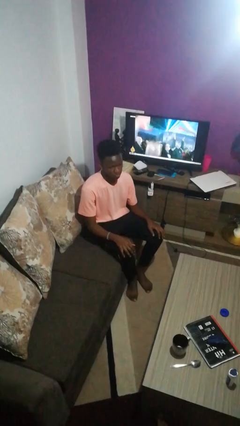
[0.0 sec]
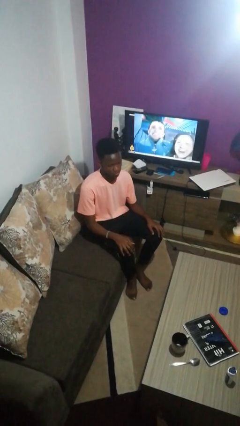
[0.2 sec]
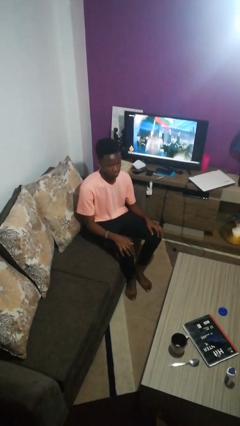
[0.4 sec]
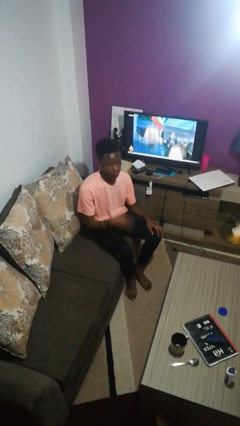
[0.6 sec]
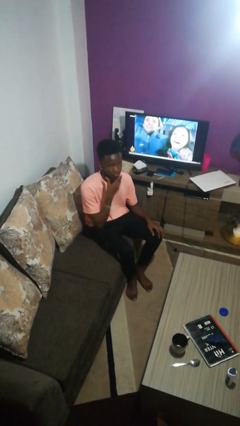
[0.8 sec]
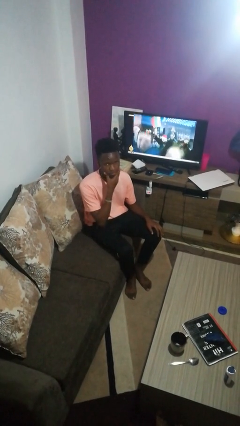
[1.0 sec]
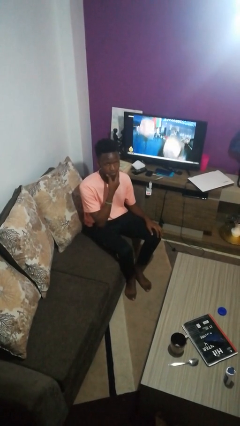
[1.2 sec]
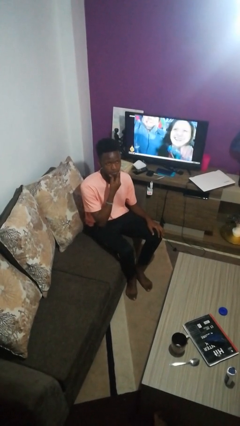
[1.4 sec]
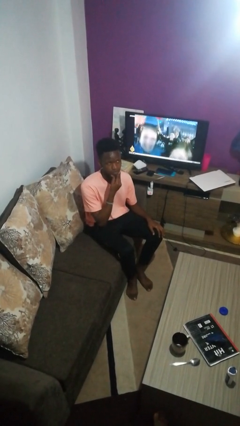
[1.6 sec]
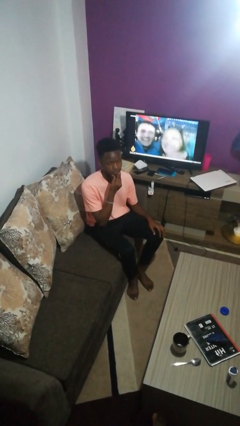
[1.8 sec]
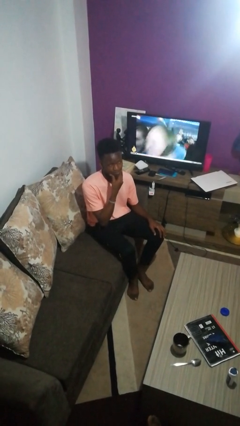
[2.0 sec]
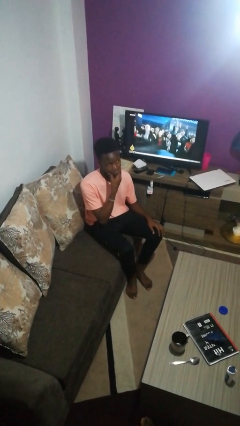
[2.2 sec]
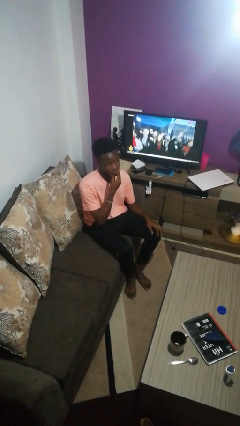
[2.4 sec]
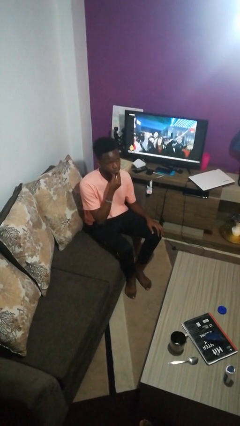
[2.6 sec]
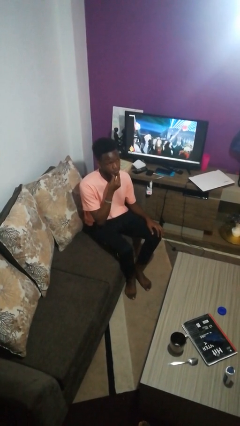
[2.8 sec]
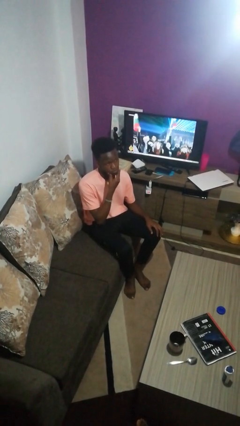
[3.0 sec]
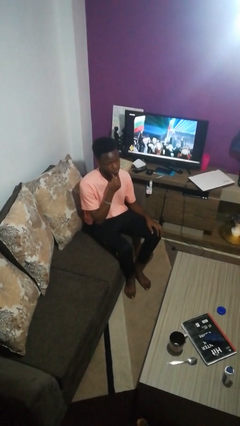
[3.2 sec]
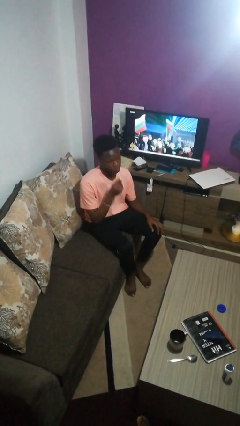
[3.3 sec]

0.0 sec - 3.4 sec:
person strokes chin

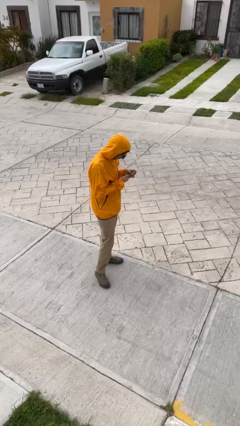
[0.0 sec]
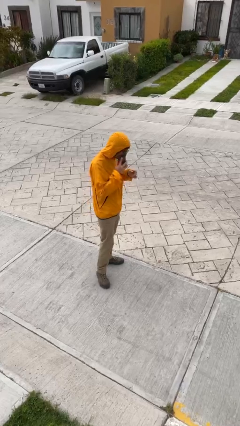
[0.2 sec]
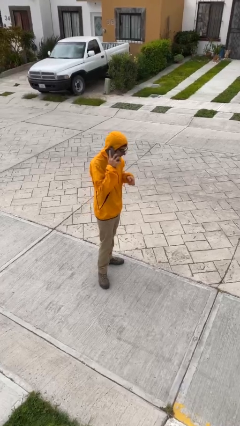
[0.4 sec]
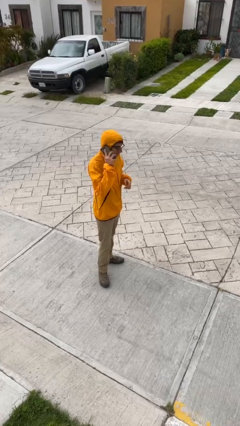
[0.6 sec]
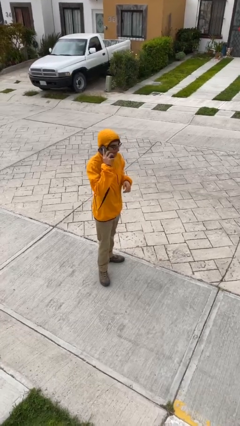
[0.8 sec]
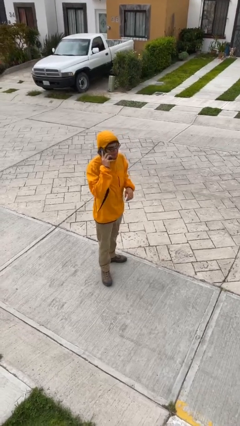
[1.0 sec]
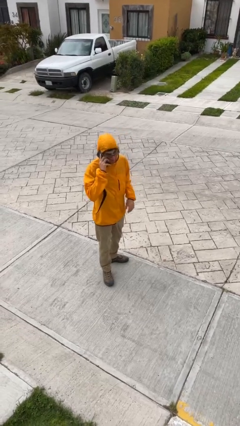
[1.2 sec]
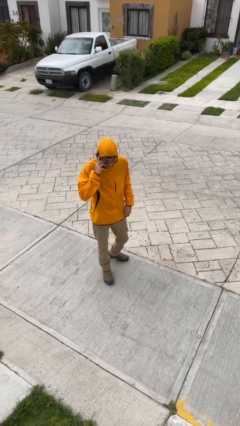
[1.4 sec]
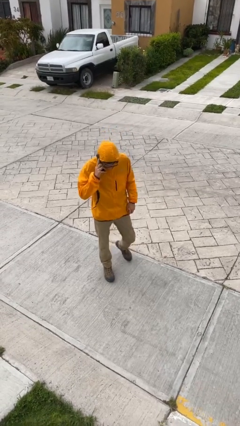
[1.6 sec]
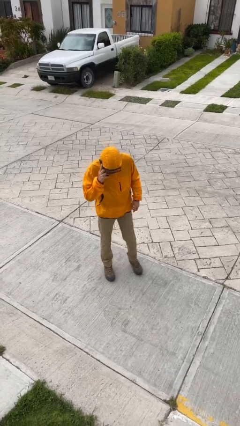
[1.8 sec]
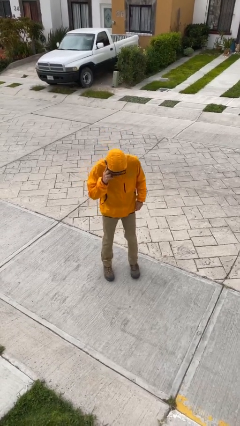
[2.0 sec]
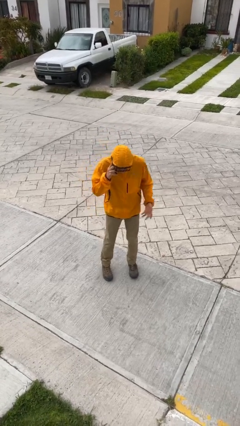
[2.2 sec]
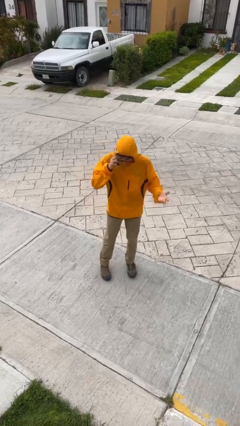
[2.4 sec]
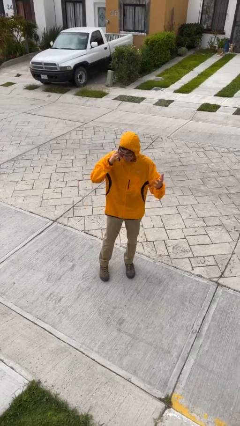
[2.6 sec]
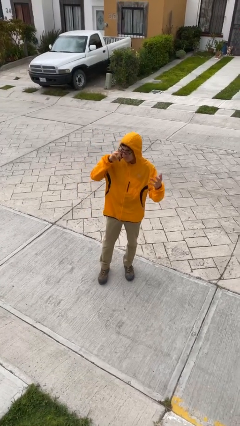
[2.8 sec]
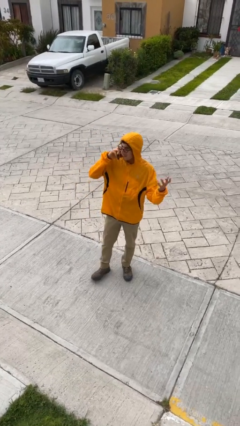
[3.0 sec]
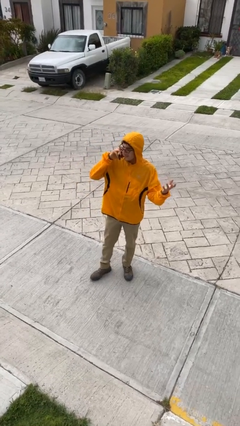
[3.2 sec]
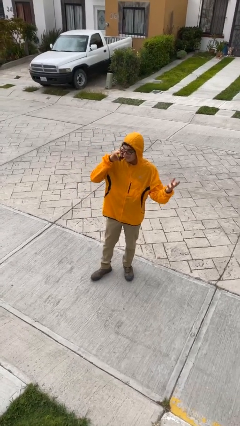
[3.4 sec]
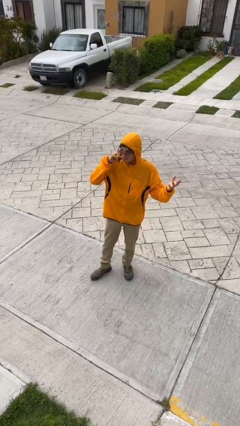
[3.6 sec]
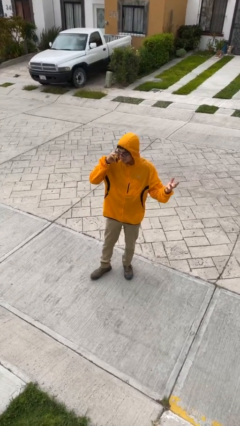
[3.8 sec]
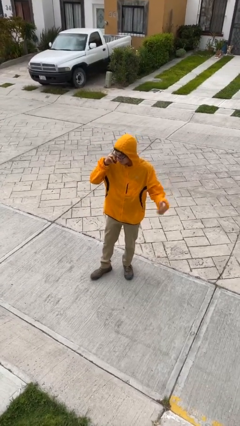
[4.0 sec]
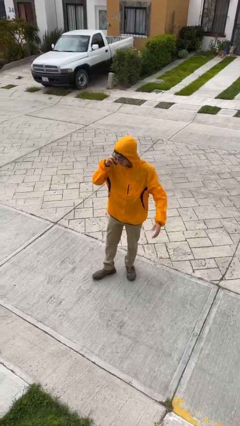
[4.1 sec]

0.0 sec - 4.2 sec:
person talks on phone

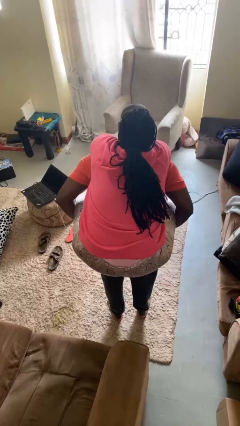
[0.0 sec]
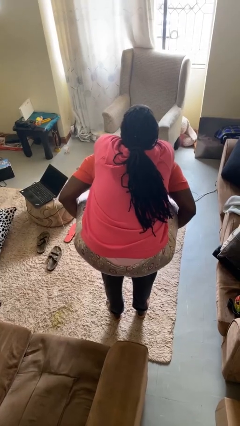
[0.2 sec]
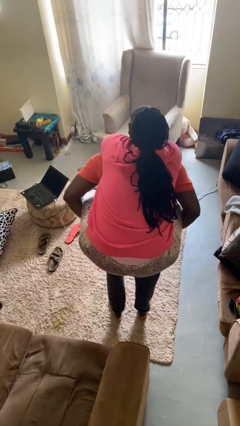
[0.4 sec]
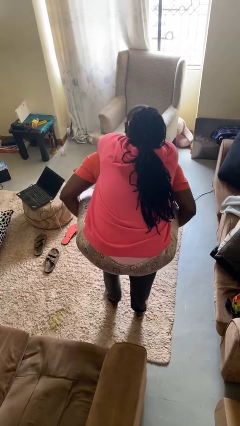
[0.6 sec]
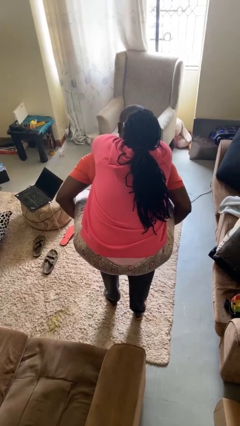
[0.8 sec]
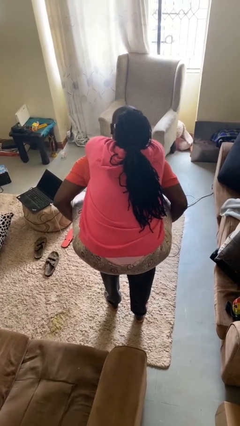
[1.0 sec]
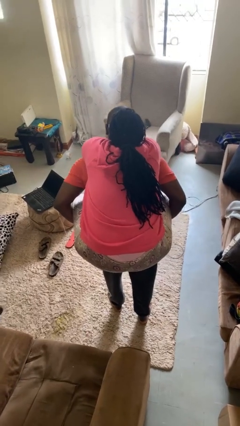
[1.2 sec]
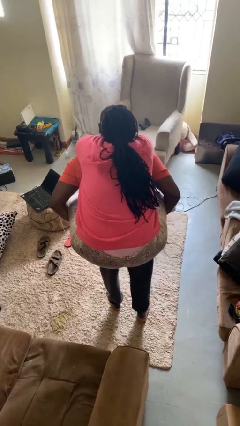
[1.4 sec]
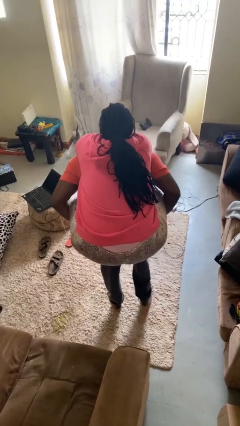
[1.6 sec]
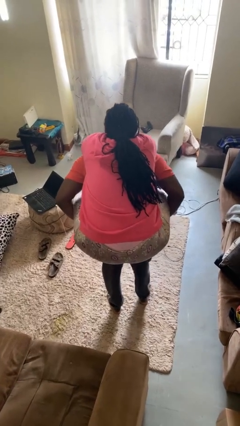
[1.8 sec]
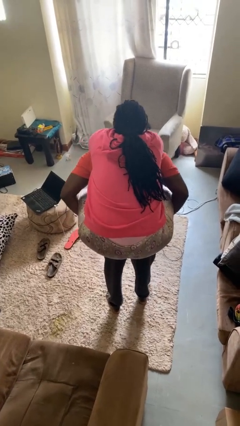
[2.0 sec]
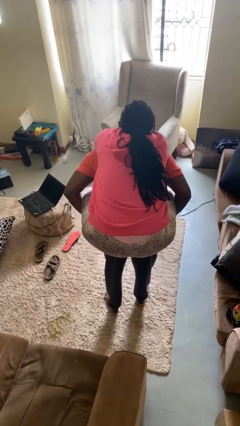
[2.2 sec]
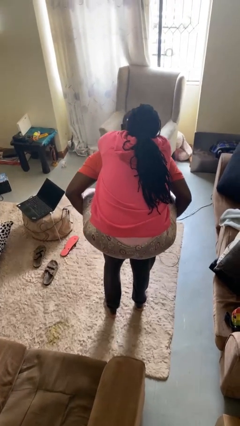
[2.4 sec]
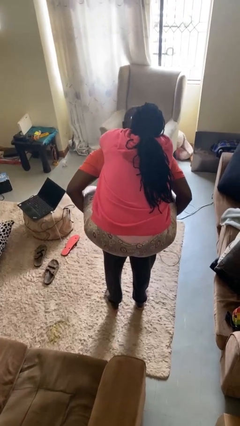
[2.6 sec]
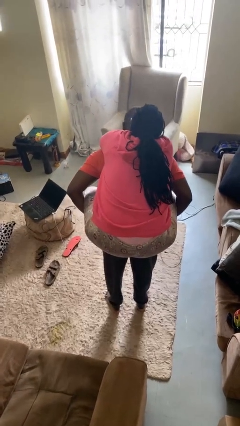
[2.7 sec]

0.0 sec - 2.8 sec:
person carries person on back

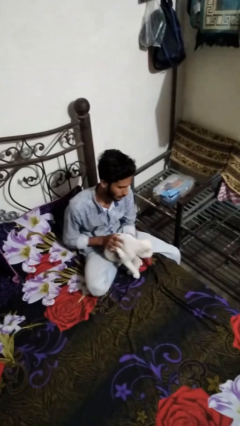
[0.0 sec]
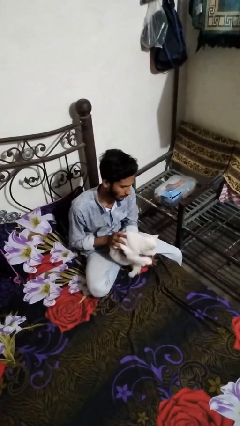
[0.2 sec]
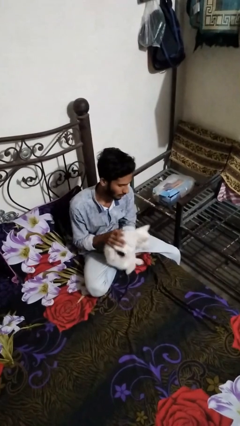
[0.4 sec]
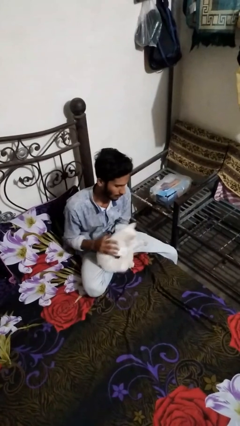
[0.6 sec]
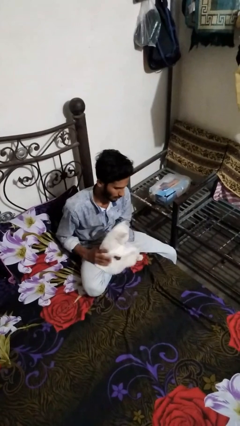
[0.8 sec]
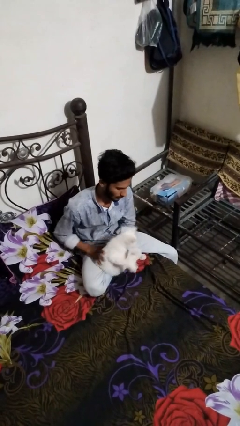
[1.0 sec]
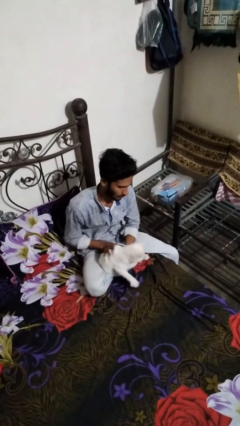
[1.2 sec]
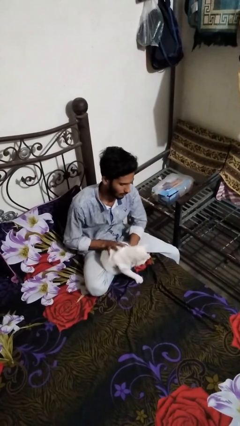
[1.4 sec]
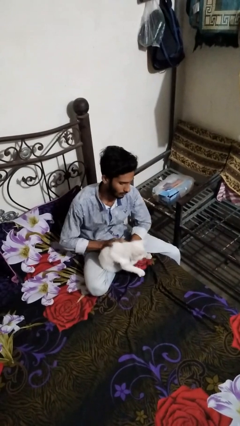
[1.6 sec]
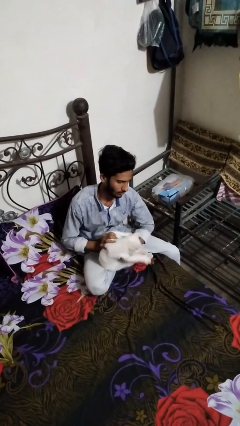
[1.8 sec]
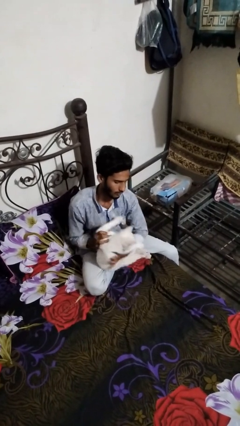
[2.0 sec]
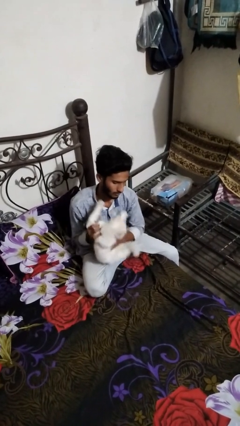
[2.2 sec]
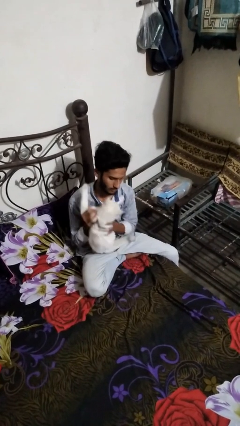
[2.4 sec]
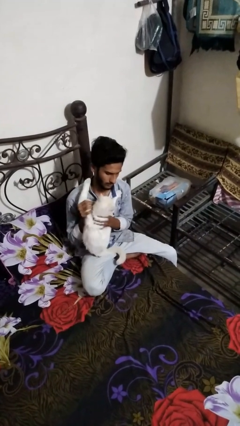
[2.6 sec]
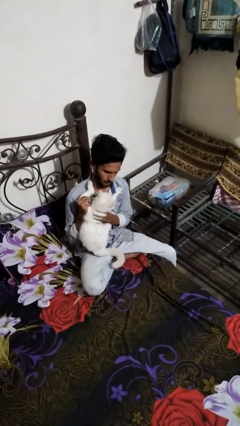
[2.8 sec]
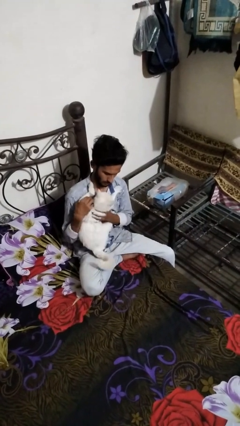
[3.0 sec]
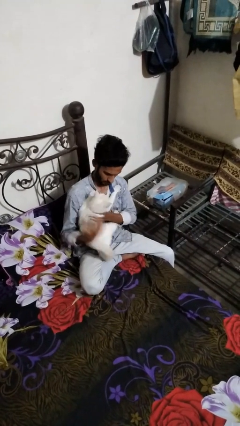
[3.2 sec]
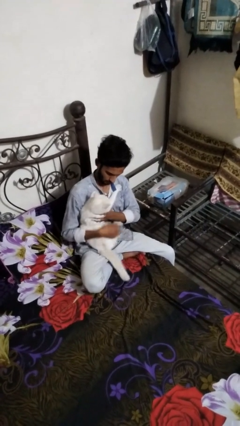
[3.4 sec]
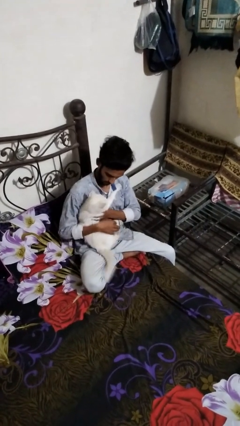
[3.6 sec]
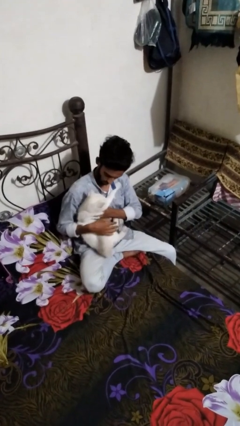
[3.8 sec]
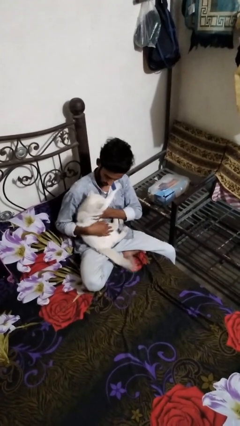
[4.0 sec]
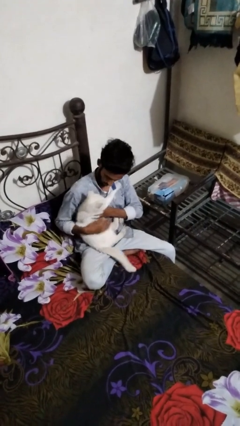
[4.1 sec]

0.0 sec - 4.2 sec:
person hugs cat

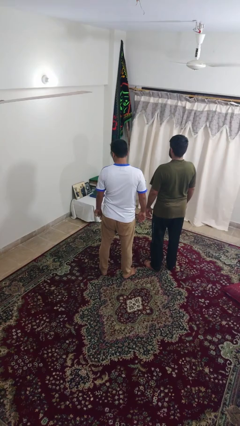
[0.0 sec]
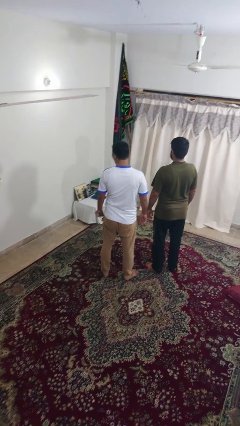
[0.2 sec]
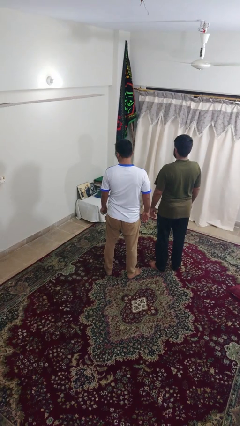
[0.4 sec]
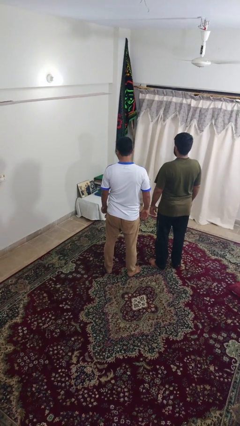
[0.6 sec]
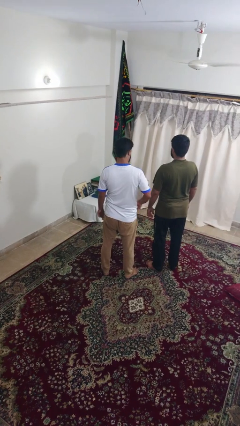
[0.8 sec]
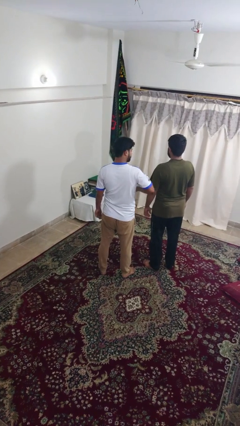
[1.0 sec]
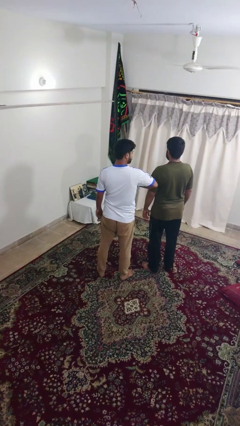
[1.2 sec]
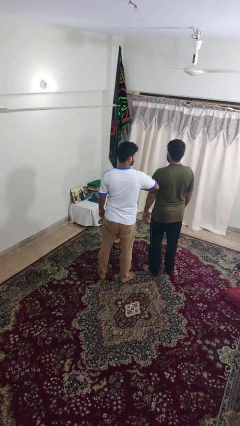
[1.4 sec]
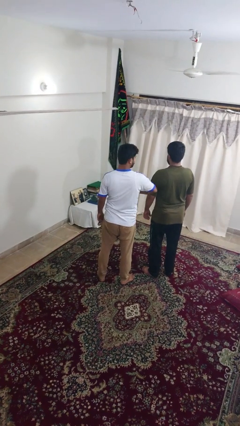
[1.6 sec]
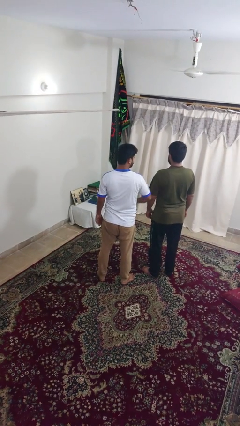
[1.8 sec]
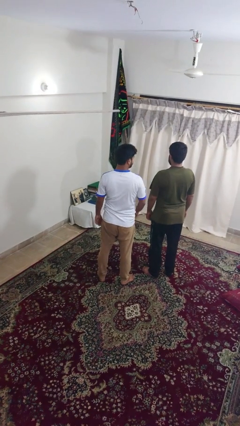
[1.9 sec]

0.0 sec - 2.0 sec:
person nudges person with elbow

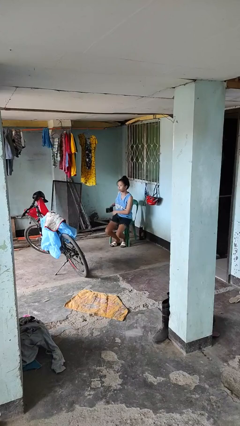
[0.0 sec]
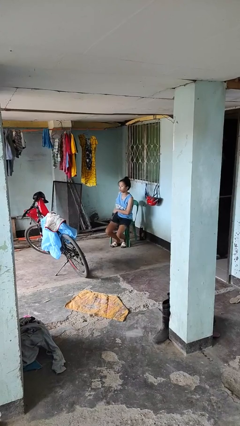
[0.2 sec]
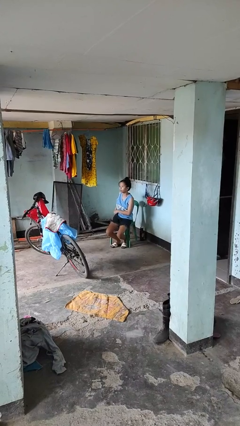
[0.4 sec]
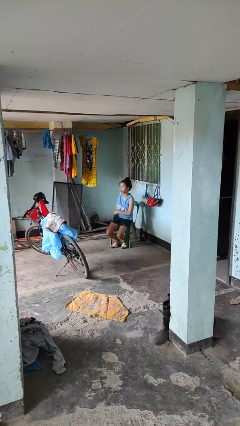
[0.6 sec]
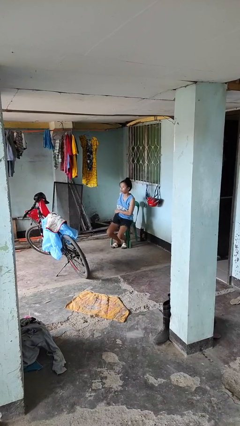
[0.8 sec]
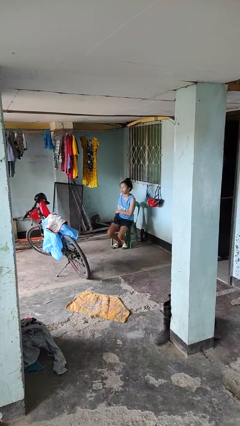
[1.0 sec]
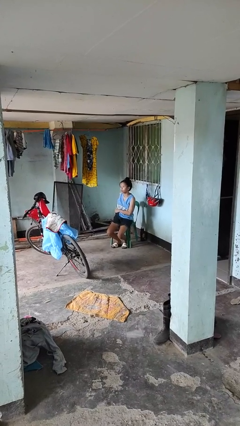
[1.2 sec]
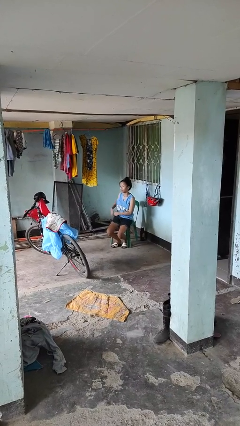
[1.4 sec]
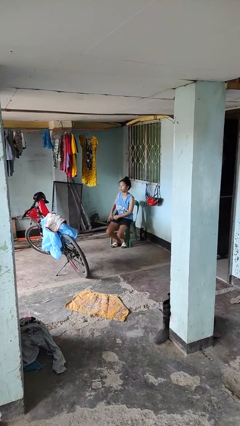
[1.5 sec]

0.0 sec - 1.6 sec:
person puts phone into pocket
